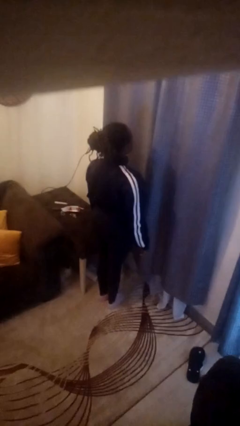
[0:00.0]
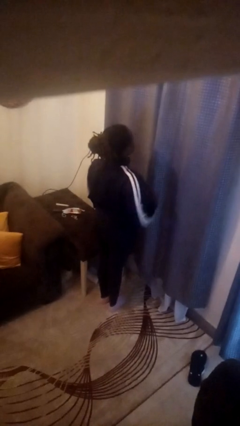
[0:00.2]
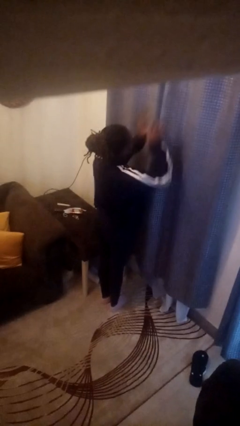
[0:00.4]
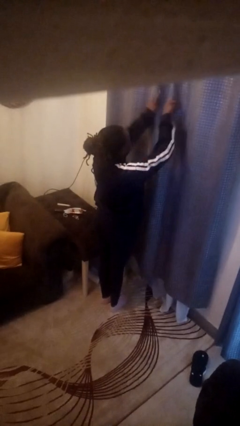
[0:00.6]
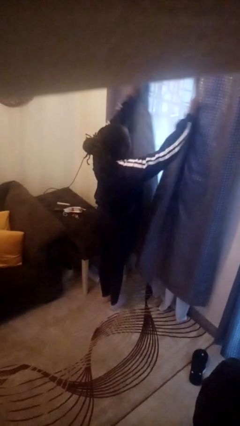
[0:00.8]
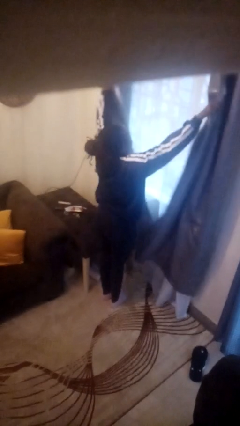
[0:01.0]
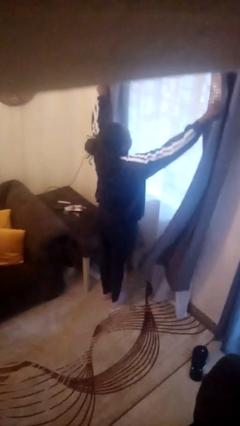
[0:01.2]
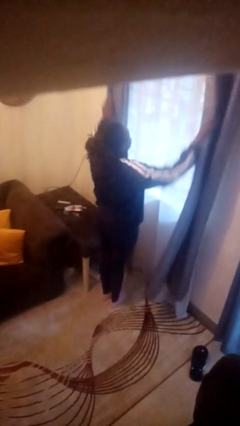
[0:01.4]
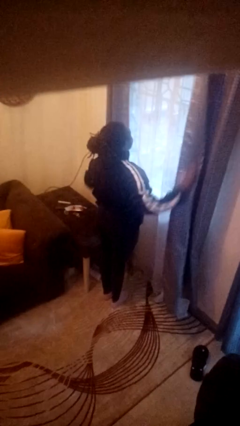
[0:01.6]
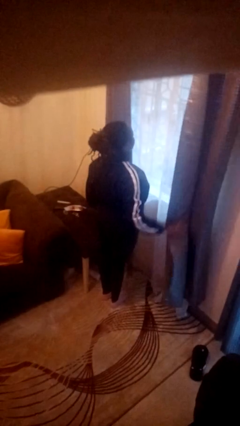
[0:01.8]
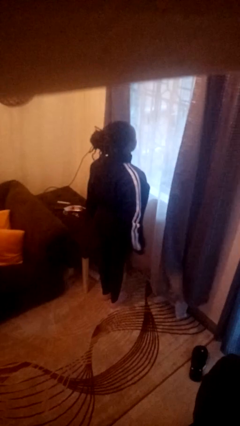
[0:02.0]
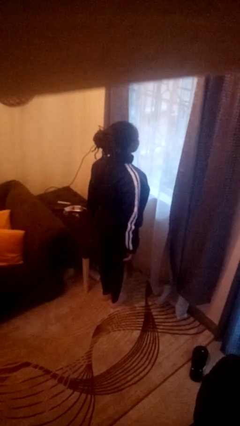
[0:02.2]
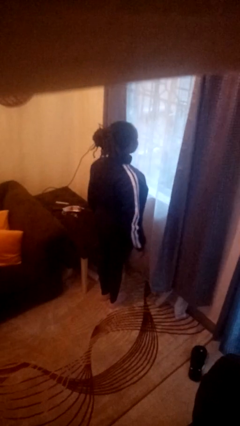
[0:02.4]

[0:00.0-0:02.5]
person opens curtains

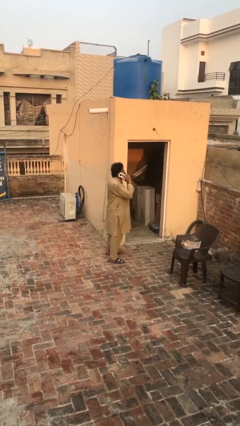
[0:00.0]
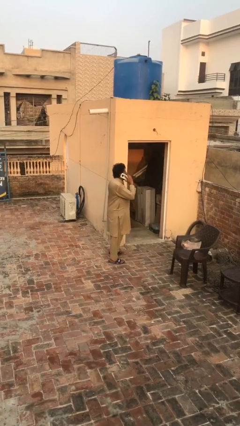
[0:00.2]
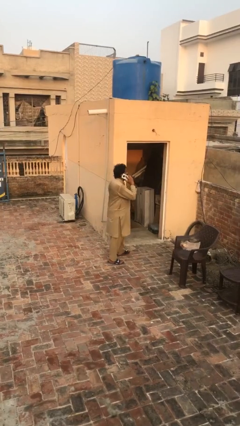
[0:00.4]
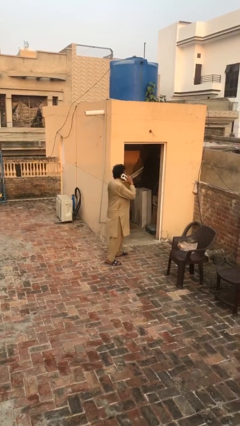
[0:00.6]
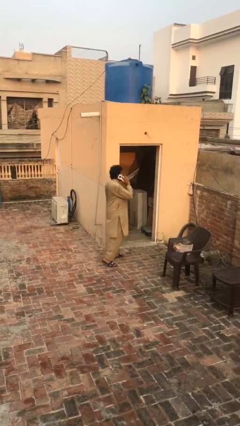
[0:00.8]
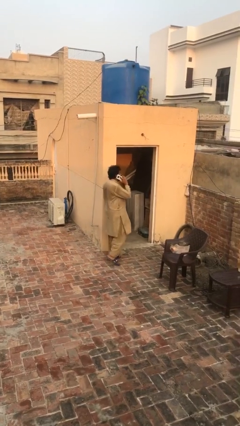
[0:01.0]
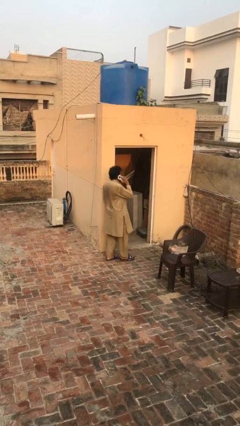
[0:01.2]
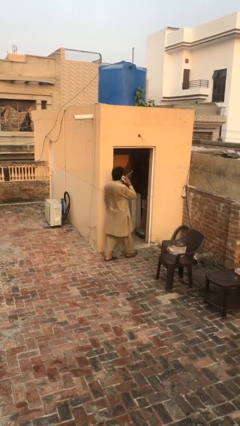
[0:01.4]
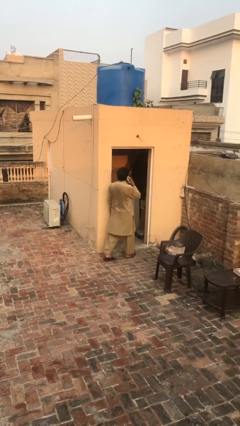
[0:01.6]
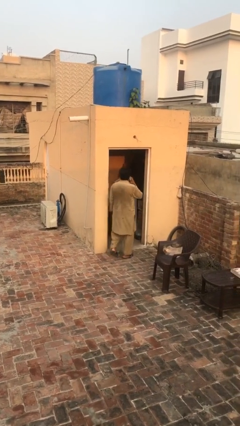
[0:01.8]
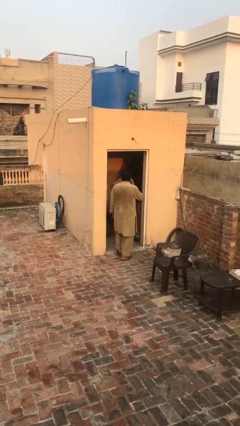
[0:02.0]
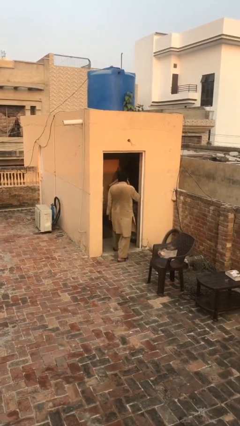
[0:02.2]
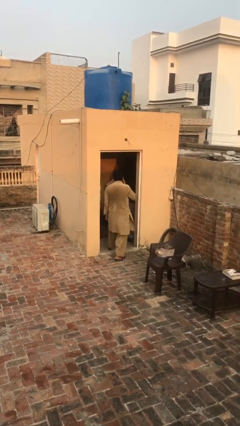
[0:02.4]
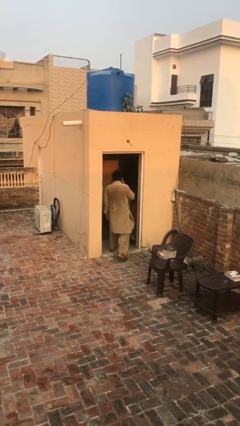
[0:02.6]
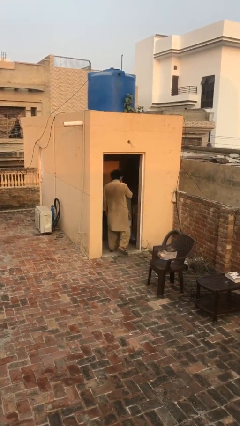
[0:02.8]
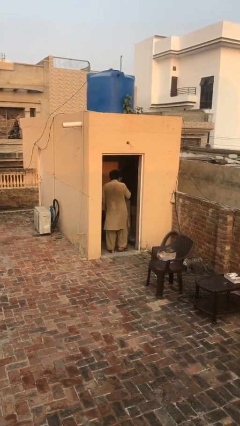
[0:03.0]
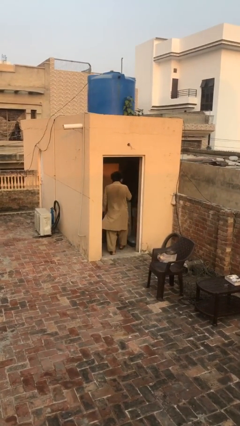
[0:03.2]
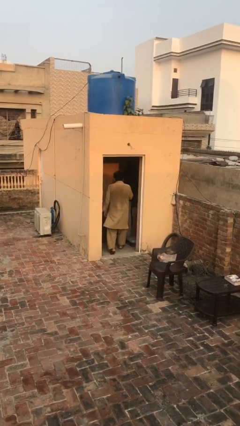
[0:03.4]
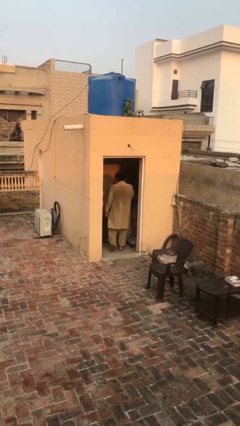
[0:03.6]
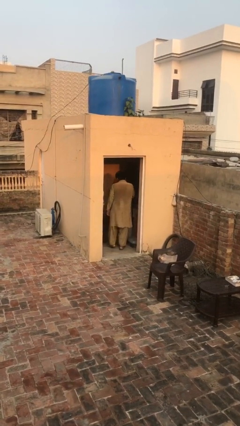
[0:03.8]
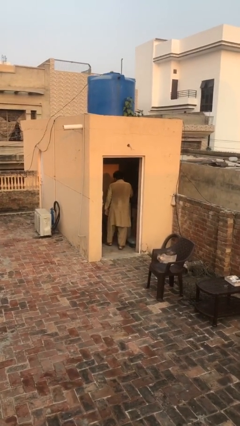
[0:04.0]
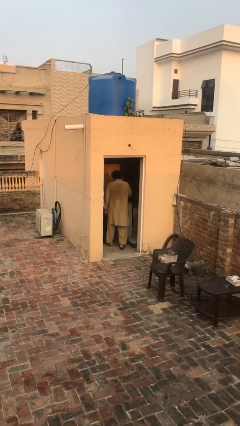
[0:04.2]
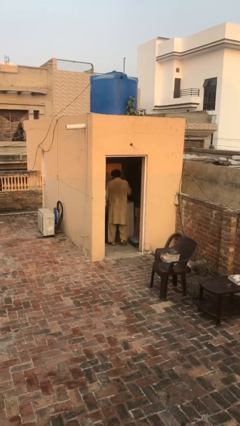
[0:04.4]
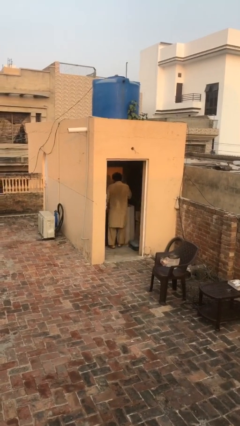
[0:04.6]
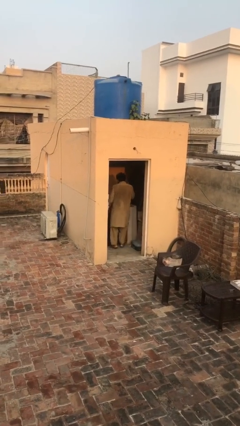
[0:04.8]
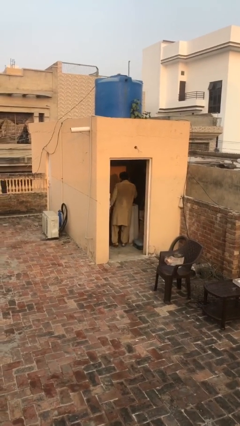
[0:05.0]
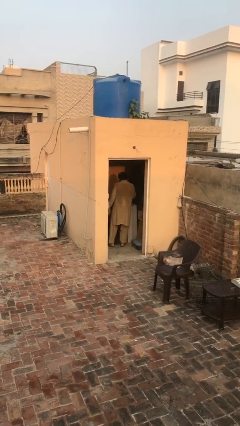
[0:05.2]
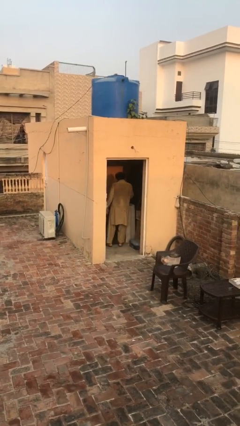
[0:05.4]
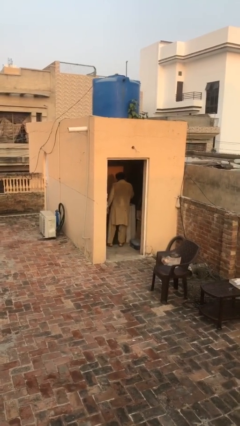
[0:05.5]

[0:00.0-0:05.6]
person exits scene through structure

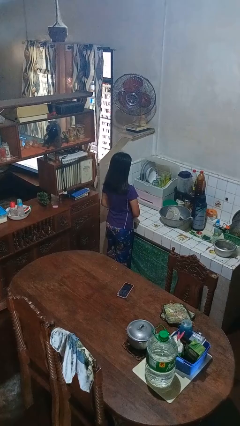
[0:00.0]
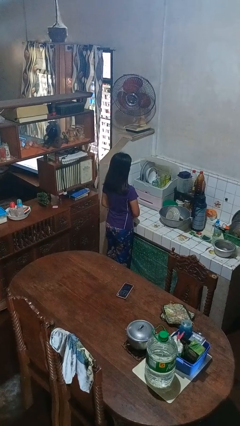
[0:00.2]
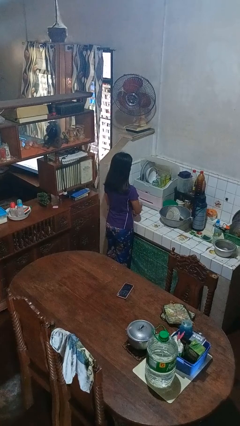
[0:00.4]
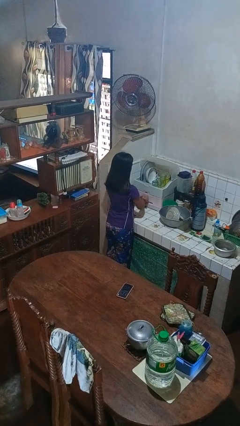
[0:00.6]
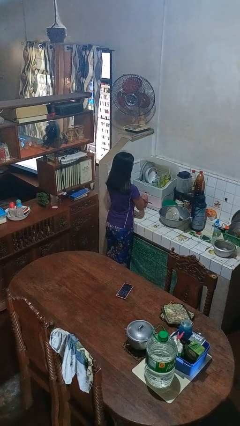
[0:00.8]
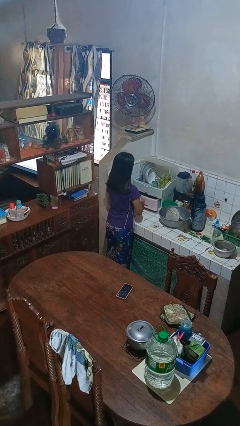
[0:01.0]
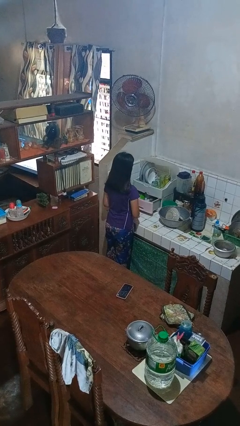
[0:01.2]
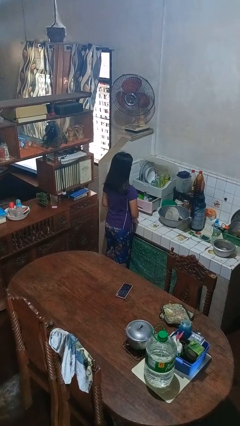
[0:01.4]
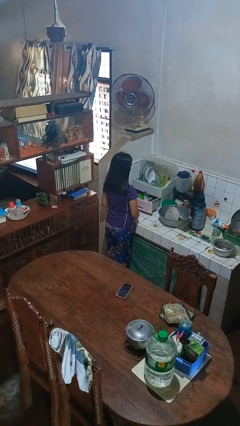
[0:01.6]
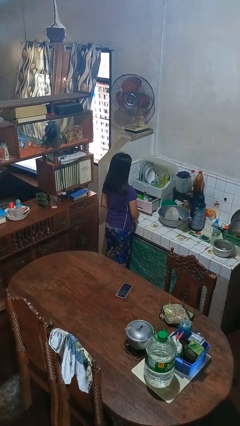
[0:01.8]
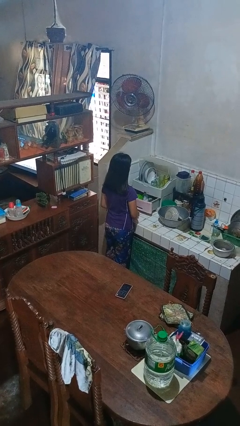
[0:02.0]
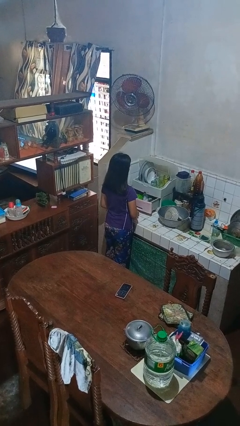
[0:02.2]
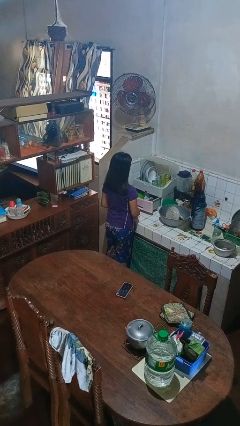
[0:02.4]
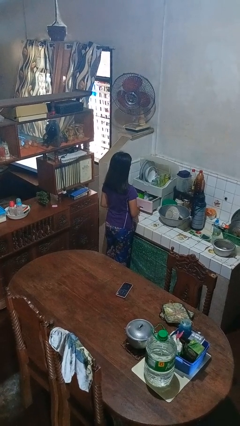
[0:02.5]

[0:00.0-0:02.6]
person opens kitchen drawer

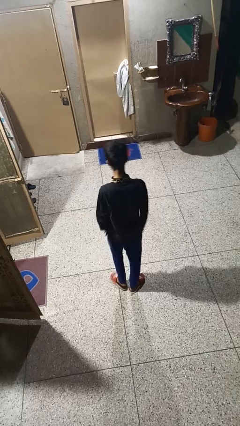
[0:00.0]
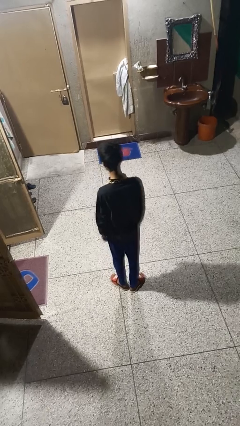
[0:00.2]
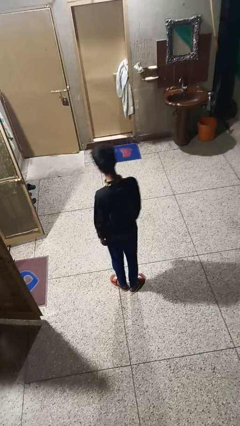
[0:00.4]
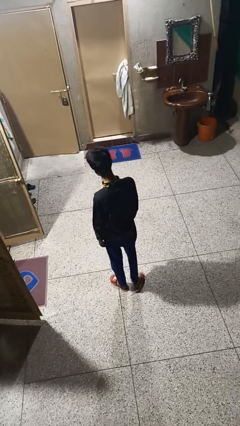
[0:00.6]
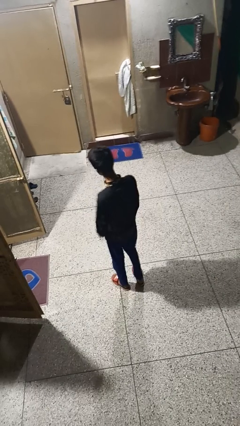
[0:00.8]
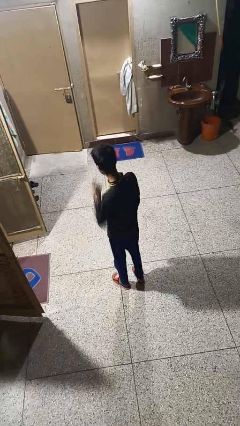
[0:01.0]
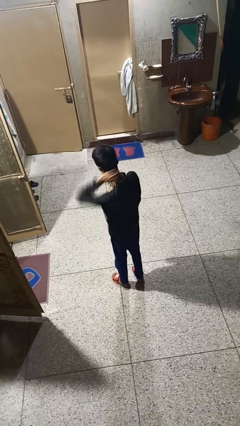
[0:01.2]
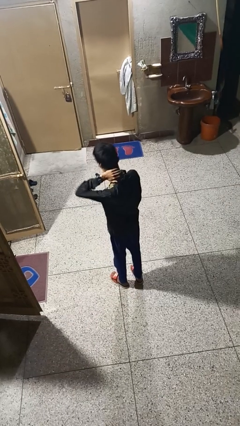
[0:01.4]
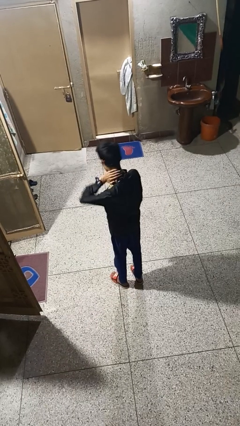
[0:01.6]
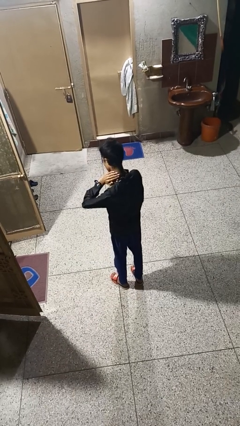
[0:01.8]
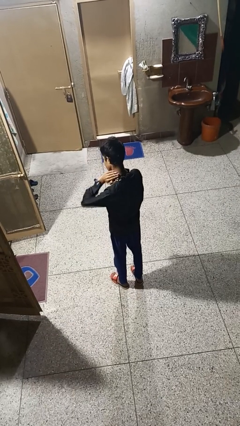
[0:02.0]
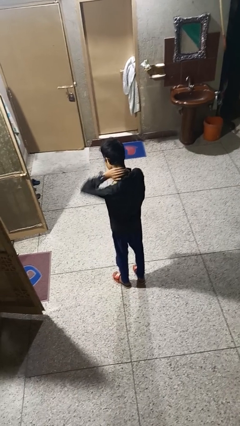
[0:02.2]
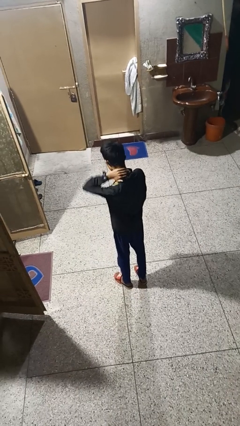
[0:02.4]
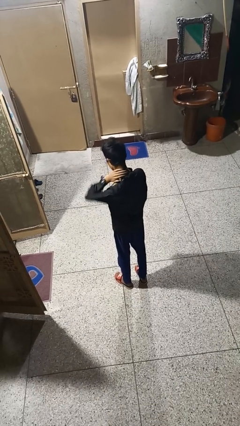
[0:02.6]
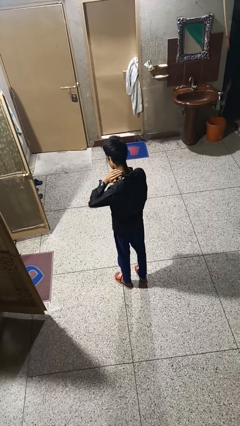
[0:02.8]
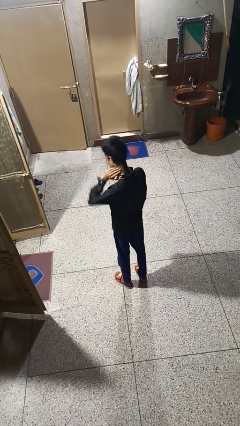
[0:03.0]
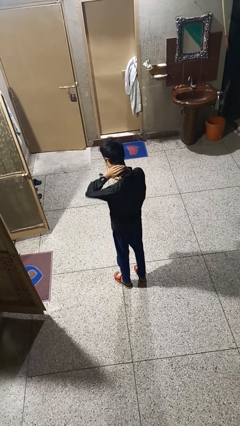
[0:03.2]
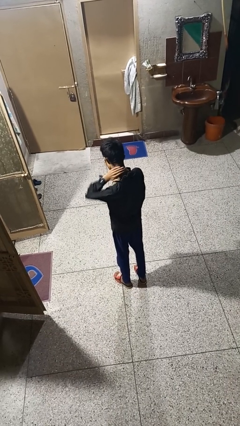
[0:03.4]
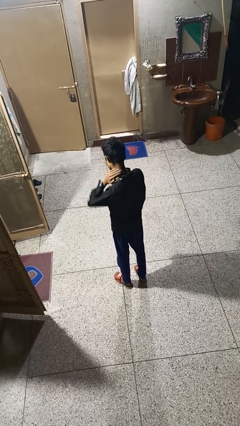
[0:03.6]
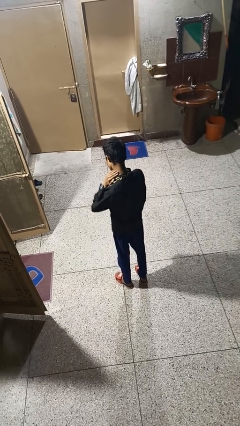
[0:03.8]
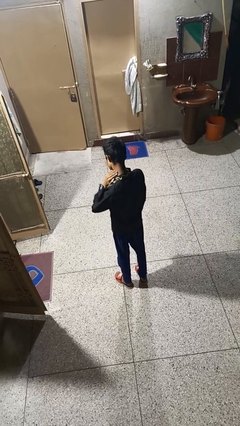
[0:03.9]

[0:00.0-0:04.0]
person rubs neck

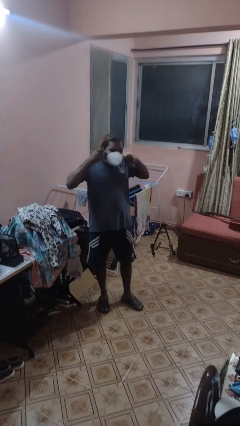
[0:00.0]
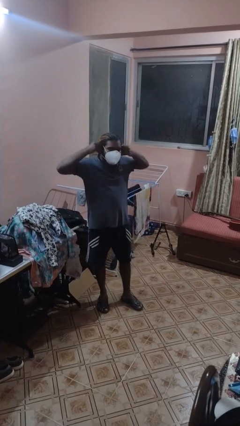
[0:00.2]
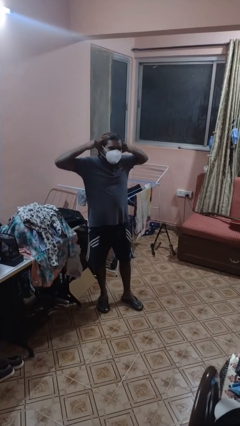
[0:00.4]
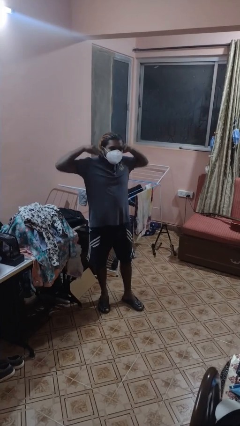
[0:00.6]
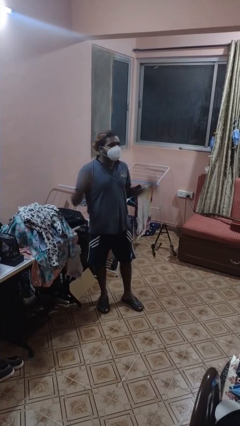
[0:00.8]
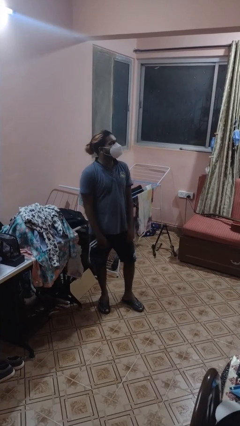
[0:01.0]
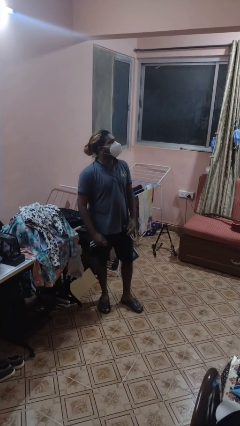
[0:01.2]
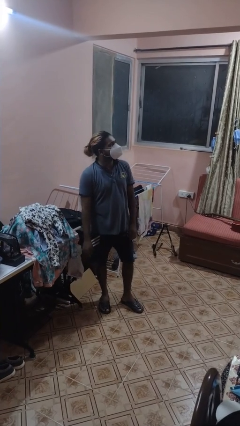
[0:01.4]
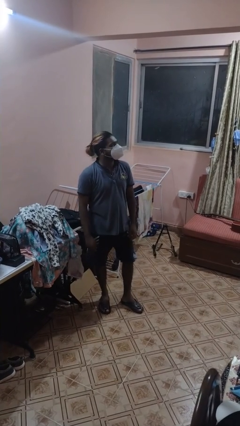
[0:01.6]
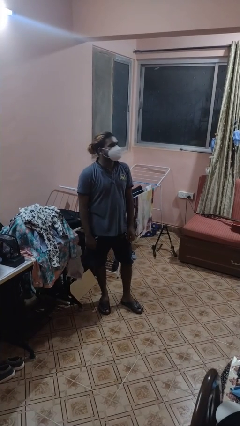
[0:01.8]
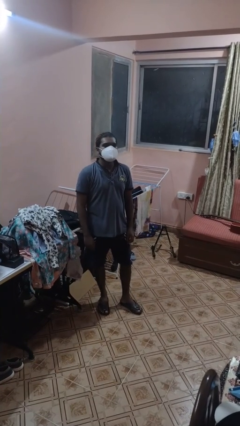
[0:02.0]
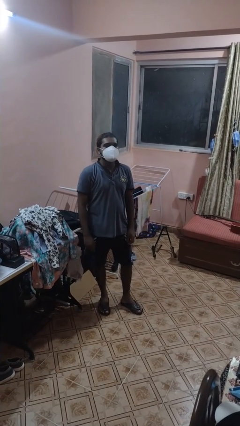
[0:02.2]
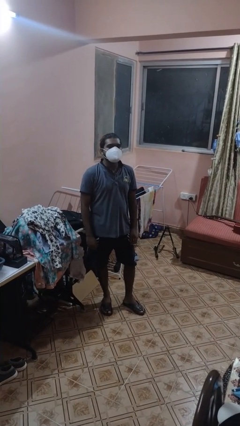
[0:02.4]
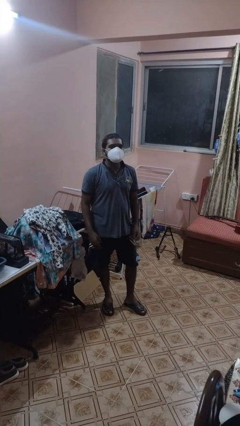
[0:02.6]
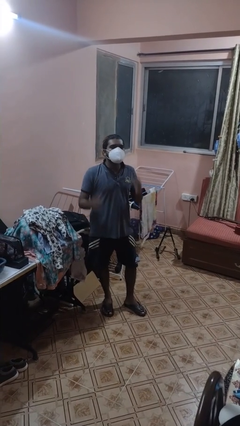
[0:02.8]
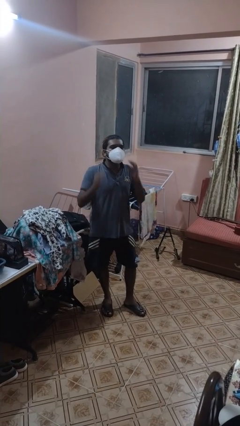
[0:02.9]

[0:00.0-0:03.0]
person puts on facemask
